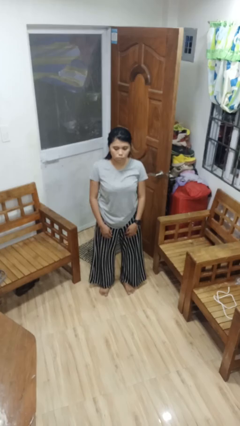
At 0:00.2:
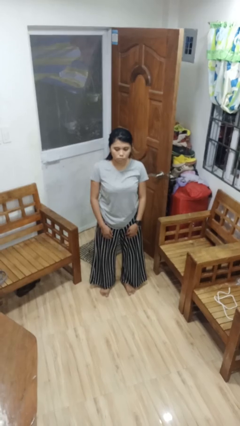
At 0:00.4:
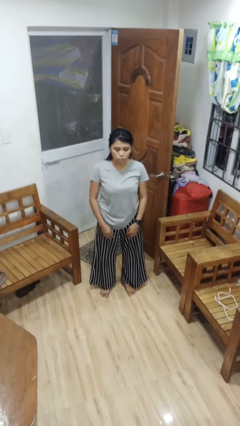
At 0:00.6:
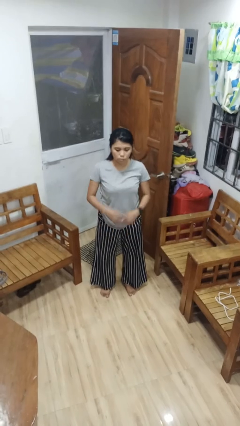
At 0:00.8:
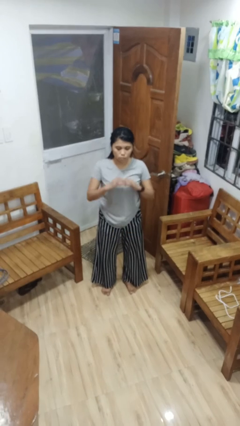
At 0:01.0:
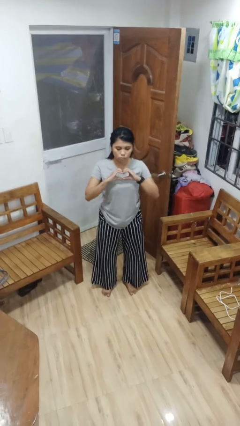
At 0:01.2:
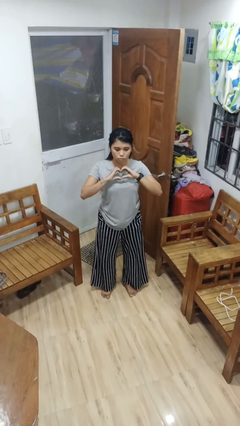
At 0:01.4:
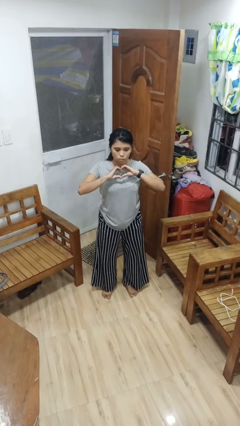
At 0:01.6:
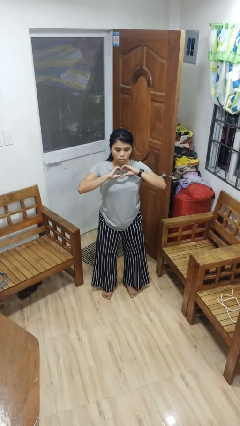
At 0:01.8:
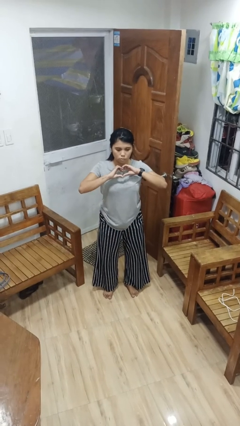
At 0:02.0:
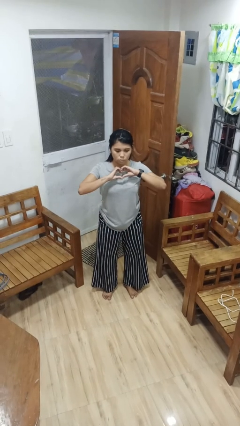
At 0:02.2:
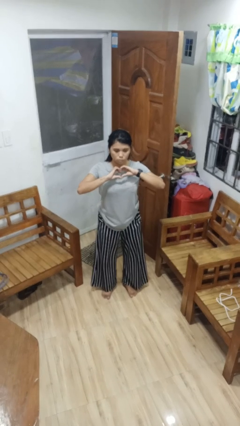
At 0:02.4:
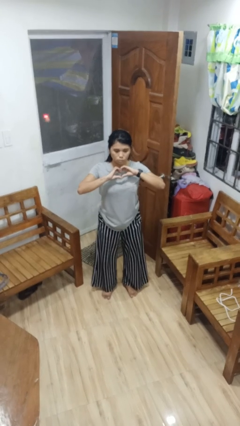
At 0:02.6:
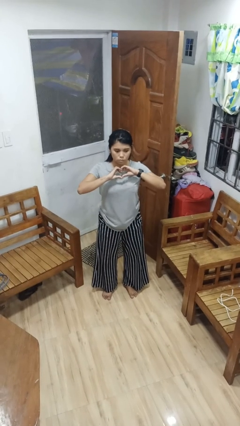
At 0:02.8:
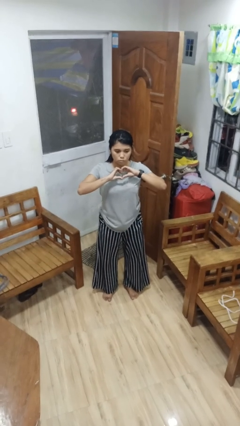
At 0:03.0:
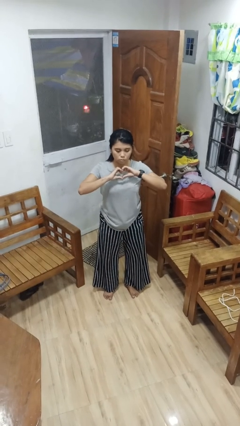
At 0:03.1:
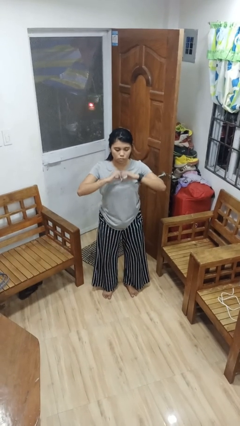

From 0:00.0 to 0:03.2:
person gestures heart

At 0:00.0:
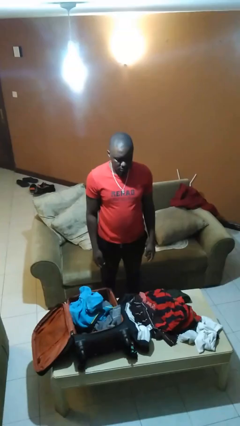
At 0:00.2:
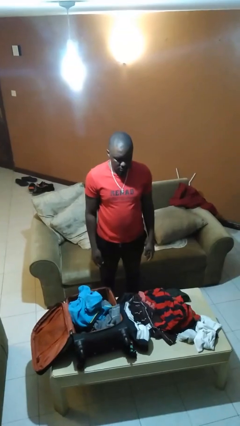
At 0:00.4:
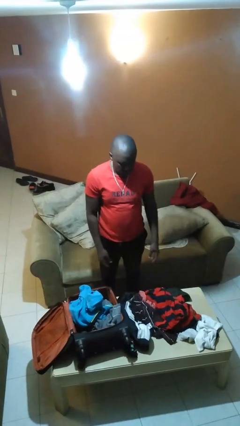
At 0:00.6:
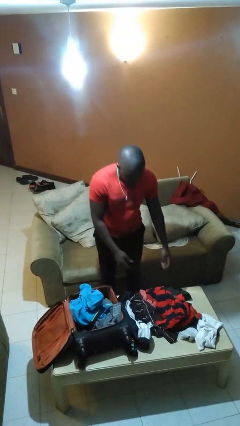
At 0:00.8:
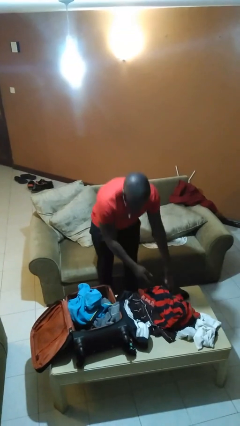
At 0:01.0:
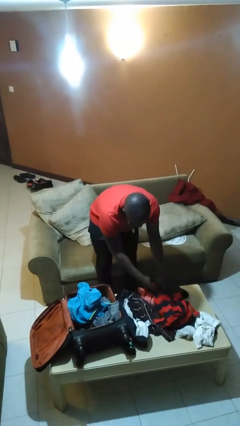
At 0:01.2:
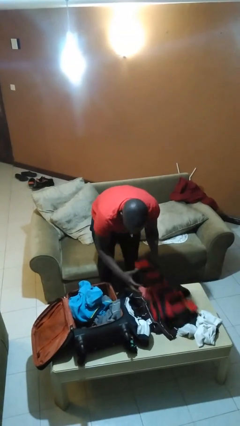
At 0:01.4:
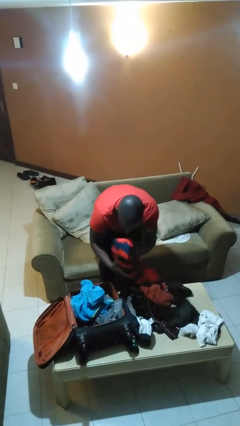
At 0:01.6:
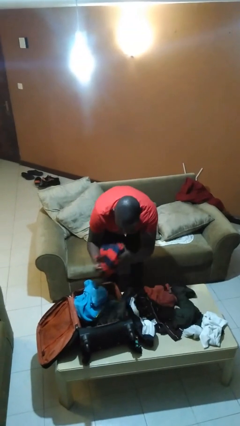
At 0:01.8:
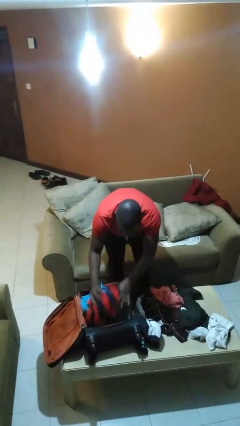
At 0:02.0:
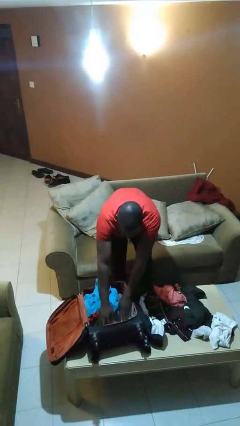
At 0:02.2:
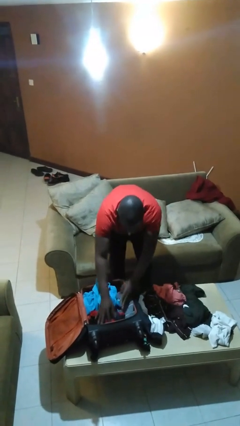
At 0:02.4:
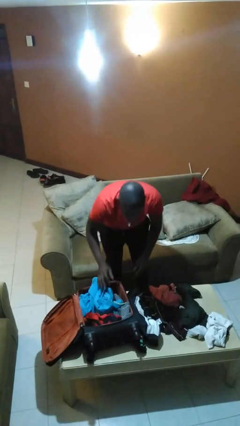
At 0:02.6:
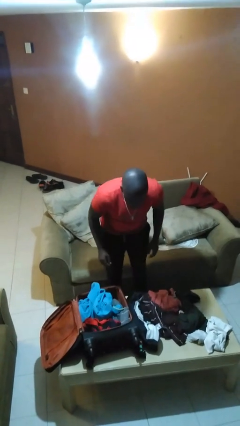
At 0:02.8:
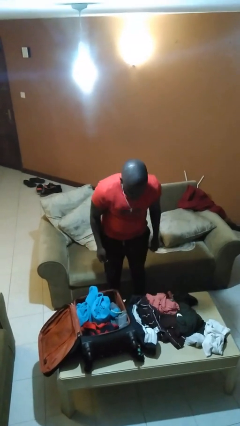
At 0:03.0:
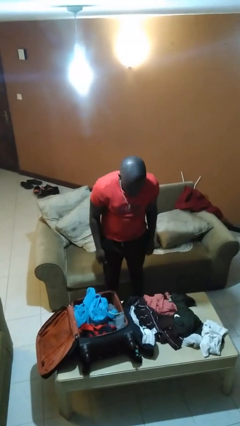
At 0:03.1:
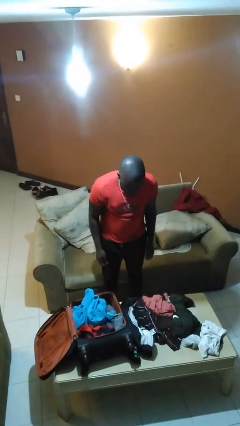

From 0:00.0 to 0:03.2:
person loads clothes into suitcase

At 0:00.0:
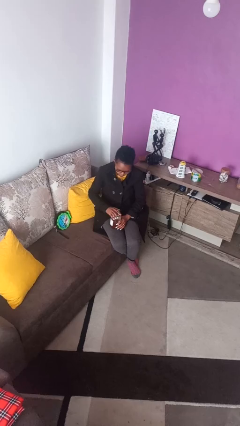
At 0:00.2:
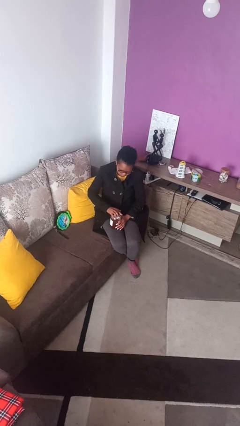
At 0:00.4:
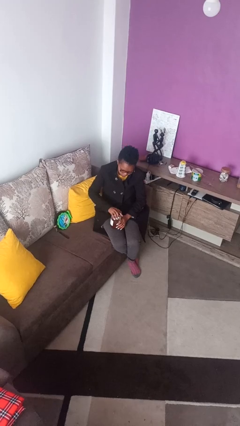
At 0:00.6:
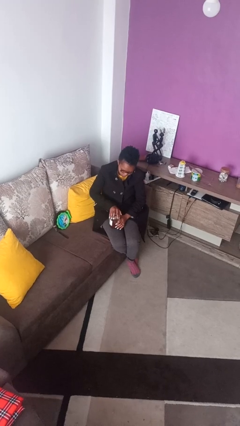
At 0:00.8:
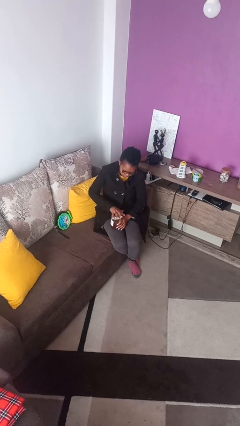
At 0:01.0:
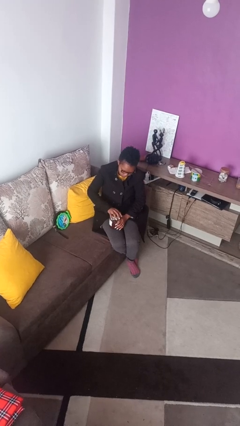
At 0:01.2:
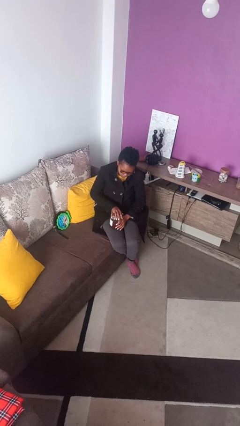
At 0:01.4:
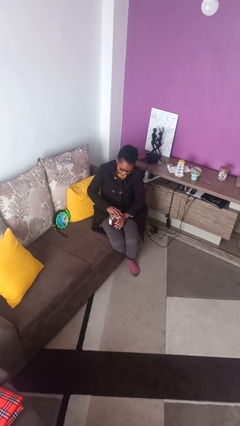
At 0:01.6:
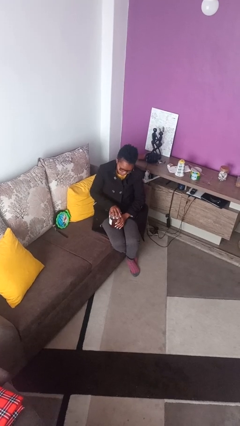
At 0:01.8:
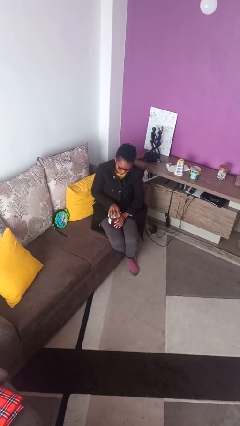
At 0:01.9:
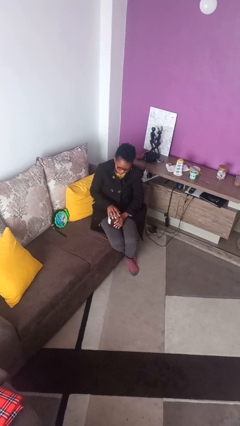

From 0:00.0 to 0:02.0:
person closes jar

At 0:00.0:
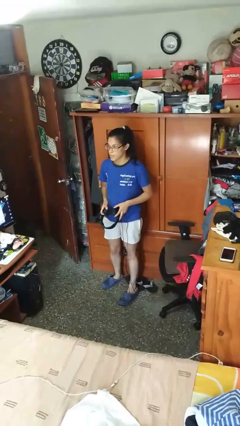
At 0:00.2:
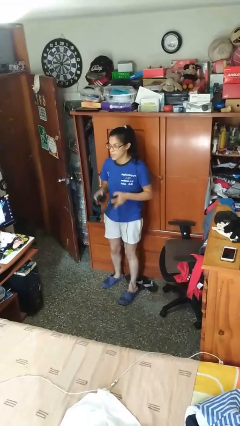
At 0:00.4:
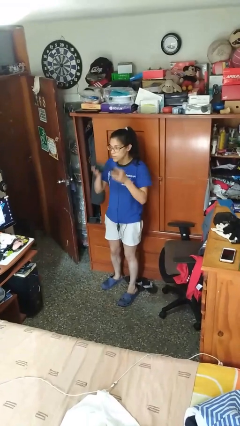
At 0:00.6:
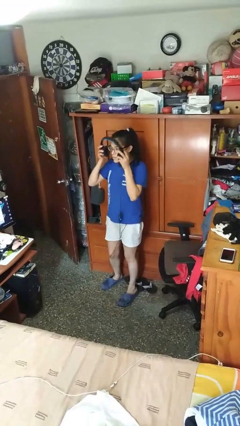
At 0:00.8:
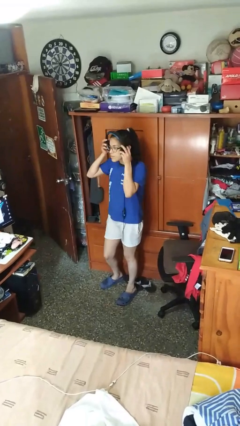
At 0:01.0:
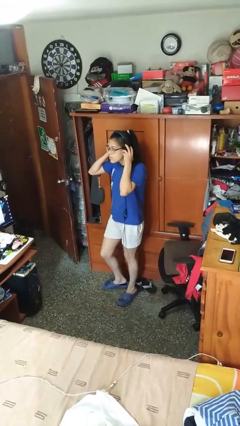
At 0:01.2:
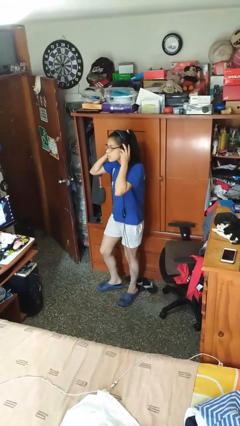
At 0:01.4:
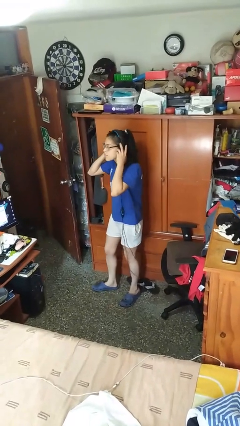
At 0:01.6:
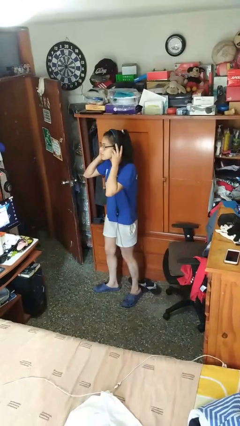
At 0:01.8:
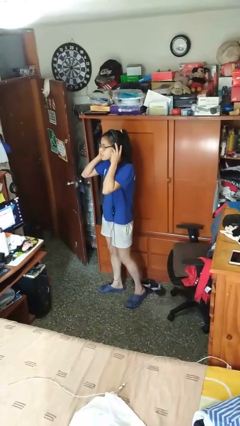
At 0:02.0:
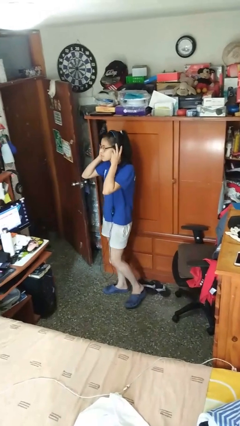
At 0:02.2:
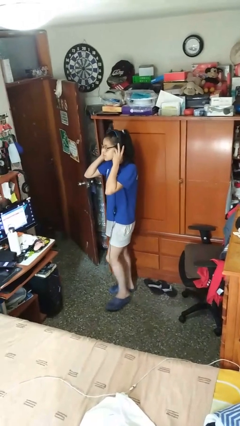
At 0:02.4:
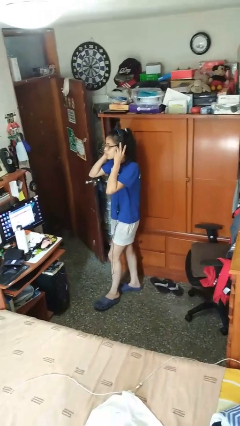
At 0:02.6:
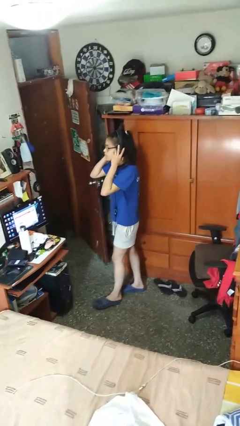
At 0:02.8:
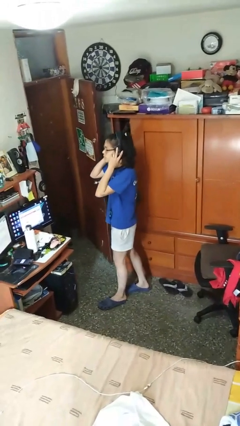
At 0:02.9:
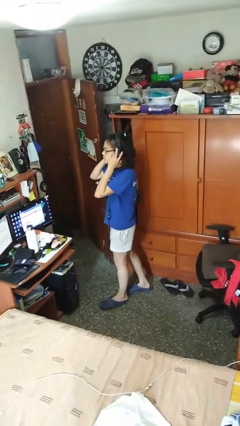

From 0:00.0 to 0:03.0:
person puts on headphones

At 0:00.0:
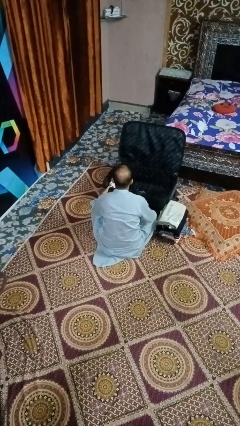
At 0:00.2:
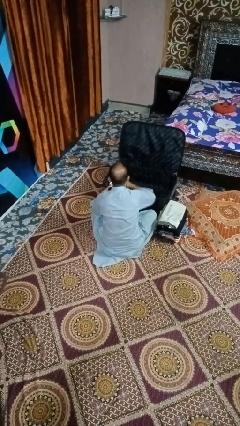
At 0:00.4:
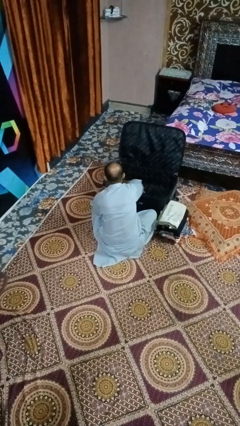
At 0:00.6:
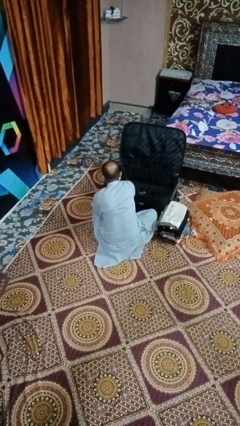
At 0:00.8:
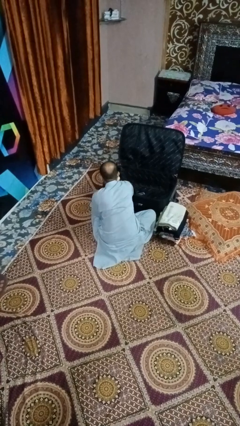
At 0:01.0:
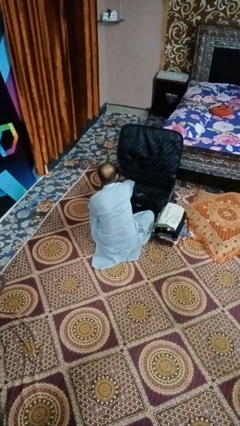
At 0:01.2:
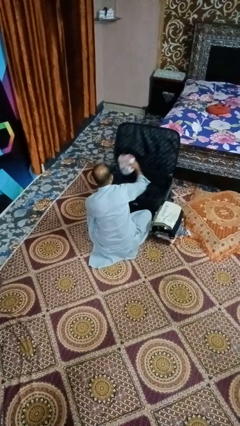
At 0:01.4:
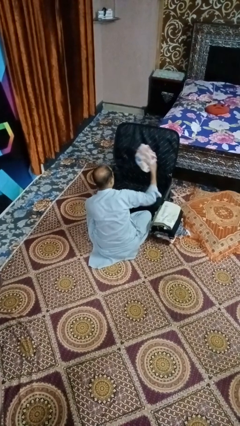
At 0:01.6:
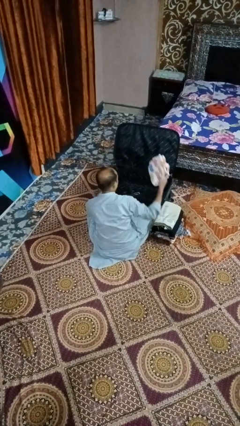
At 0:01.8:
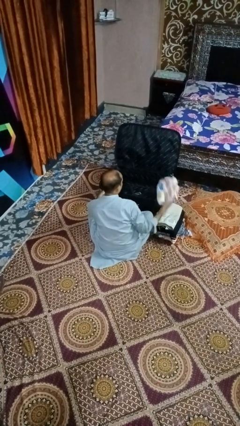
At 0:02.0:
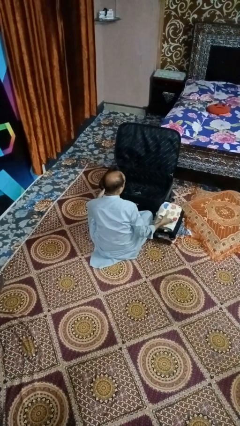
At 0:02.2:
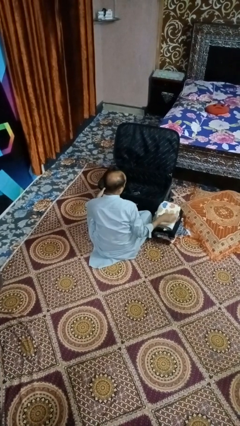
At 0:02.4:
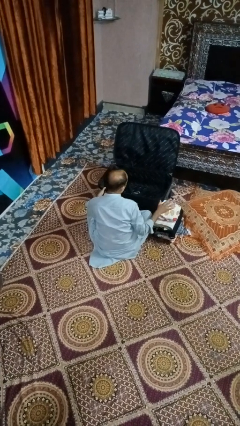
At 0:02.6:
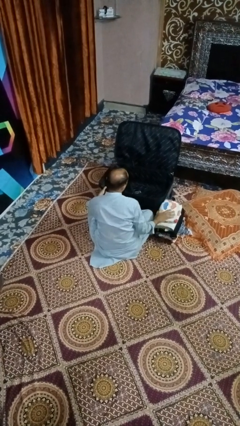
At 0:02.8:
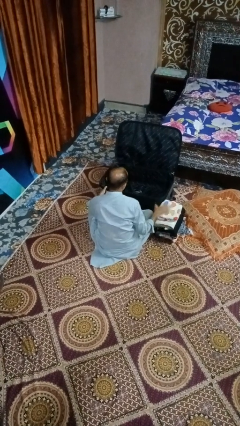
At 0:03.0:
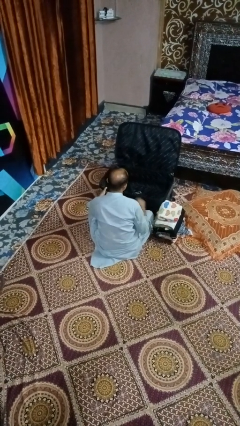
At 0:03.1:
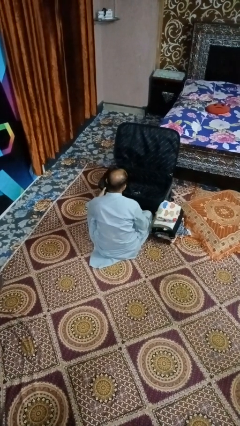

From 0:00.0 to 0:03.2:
person unloads clothes from suitcase

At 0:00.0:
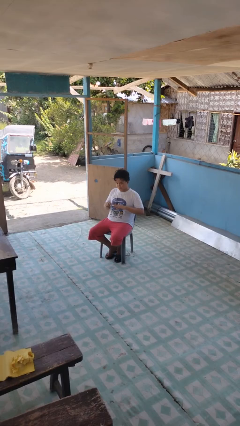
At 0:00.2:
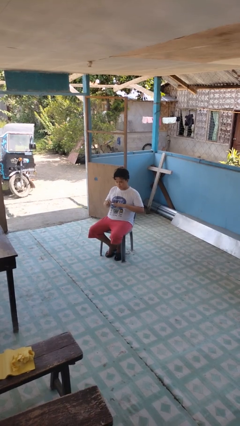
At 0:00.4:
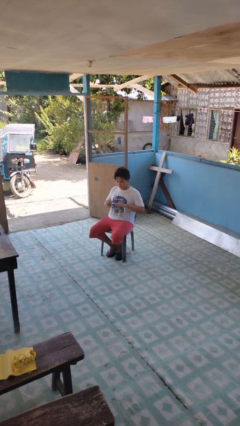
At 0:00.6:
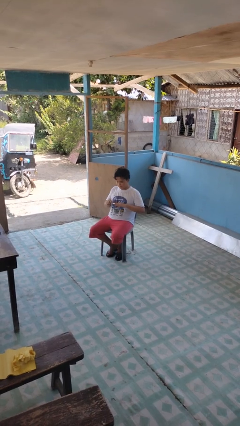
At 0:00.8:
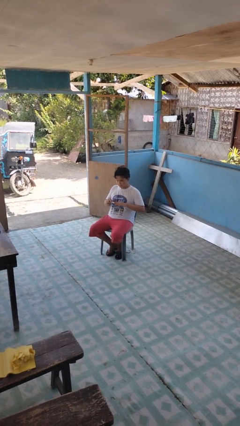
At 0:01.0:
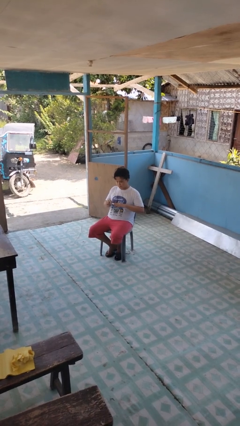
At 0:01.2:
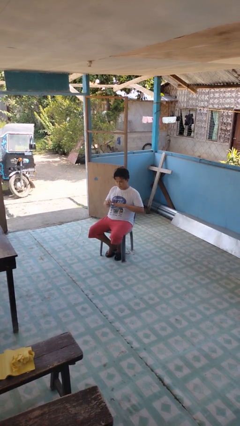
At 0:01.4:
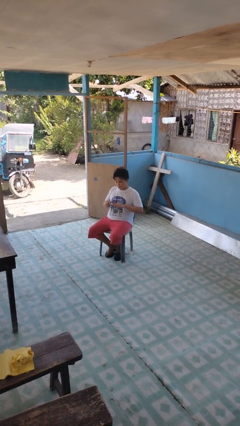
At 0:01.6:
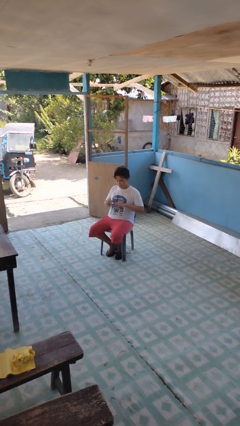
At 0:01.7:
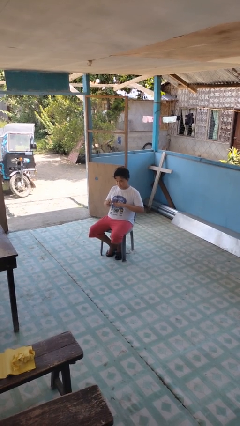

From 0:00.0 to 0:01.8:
person files fingernails

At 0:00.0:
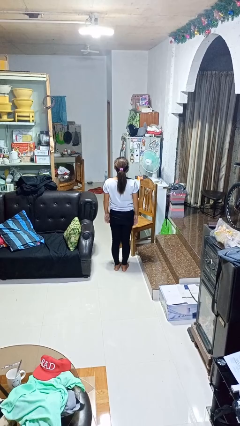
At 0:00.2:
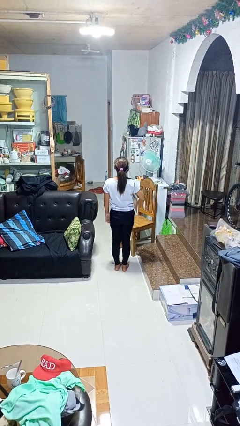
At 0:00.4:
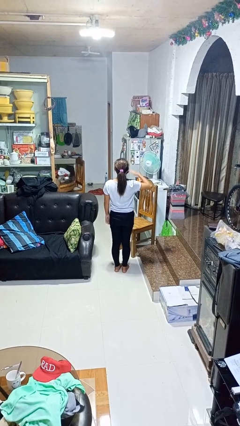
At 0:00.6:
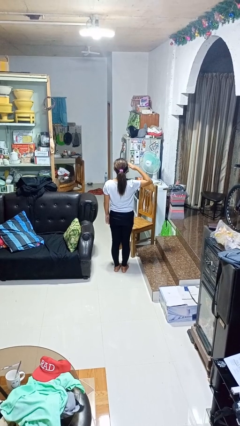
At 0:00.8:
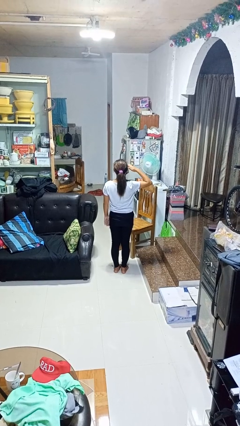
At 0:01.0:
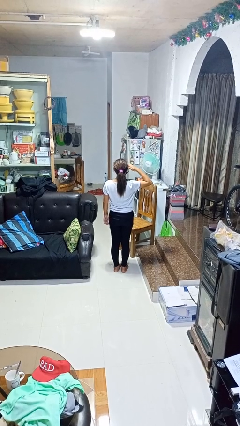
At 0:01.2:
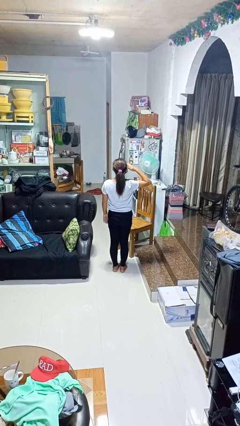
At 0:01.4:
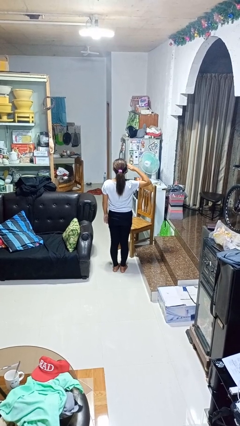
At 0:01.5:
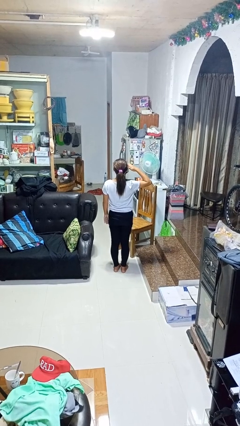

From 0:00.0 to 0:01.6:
person salutes
